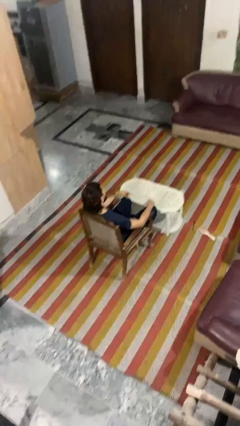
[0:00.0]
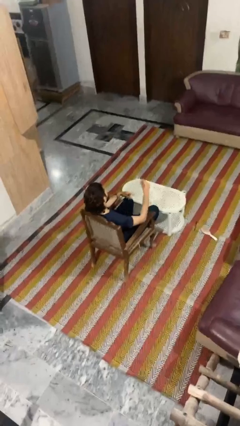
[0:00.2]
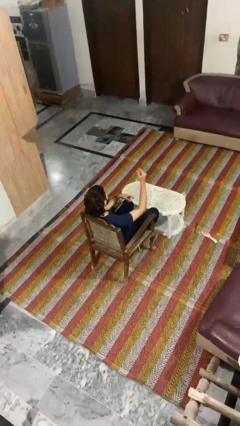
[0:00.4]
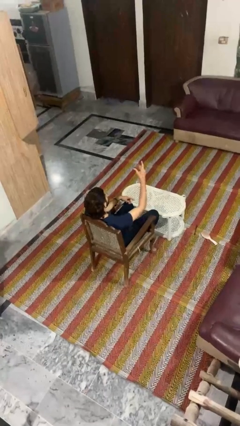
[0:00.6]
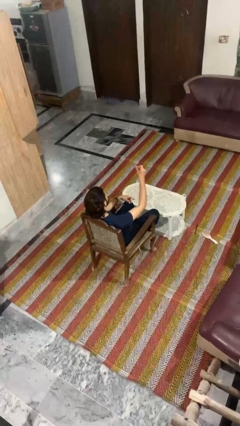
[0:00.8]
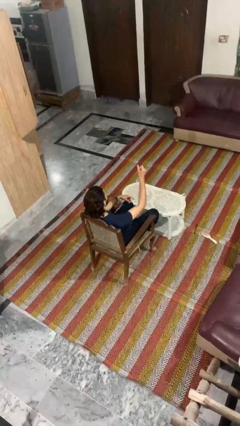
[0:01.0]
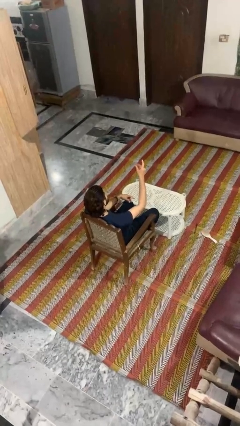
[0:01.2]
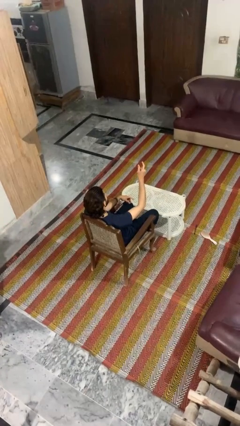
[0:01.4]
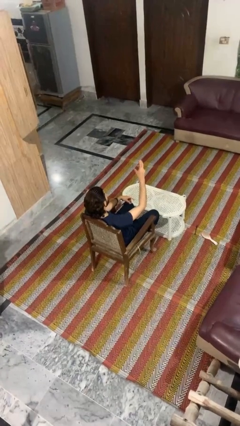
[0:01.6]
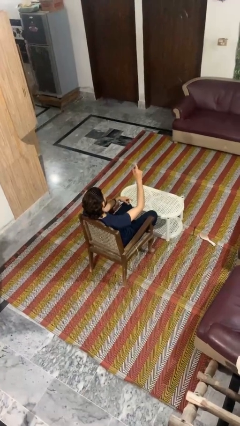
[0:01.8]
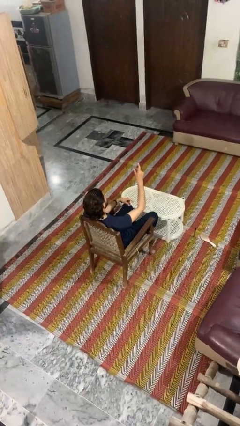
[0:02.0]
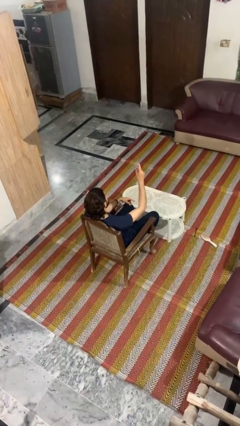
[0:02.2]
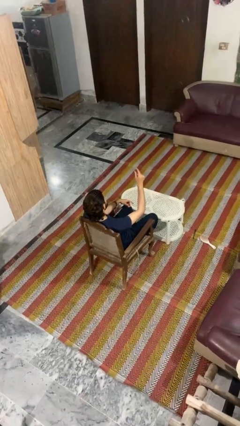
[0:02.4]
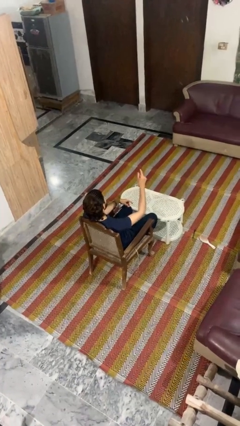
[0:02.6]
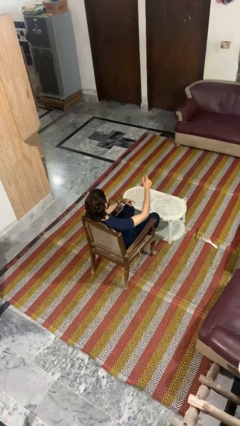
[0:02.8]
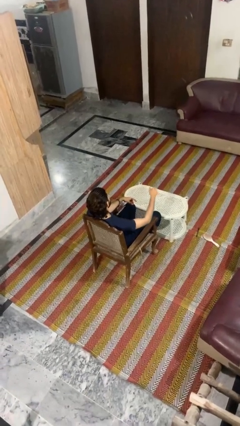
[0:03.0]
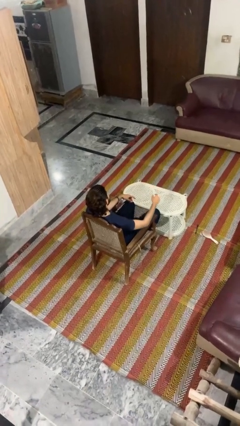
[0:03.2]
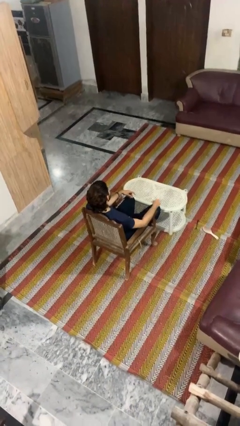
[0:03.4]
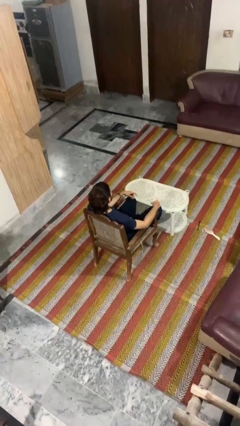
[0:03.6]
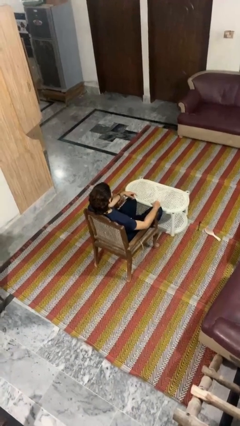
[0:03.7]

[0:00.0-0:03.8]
person snaps fingers

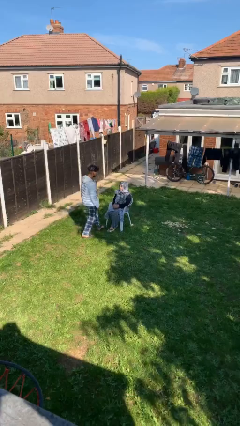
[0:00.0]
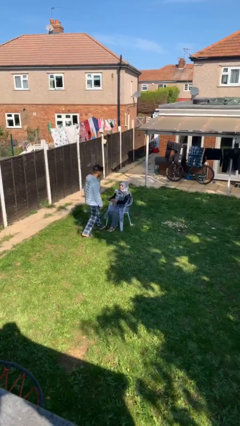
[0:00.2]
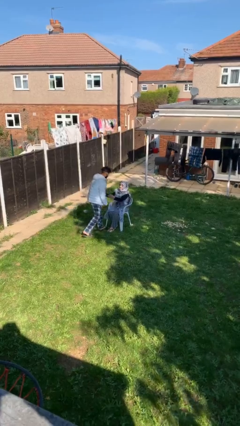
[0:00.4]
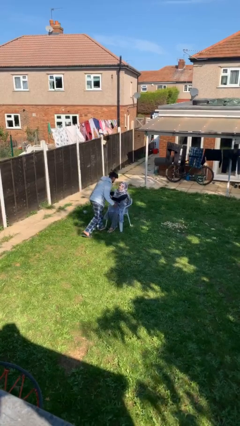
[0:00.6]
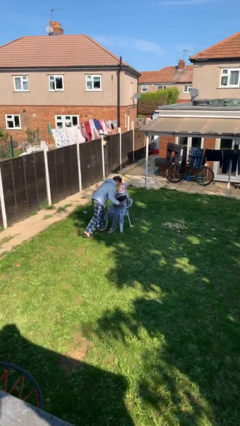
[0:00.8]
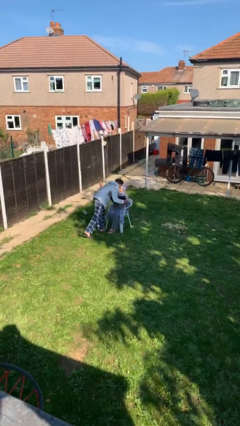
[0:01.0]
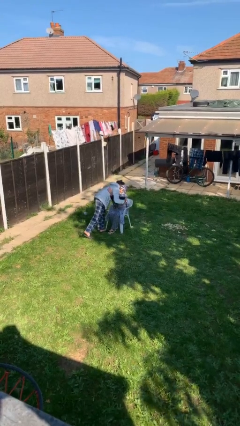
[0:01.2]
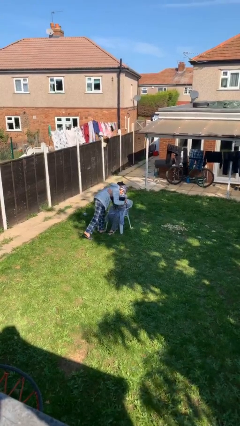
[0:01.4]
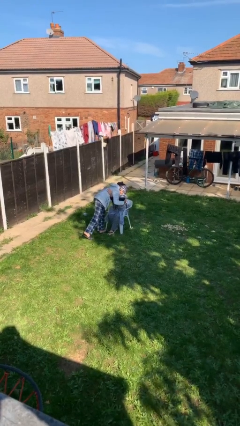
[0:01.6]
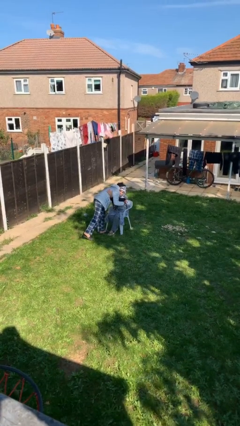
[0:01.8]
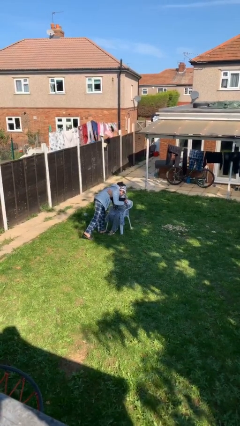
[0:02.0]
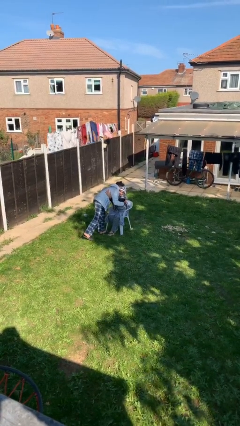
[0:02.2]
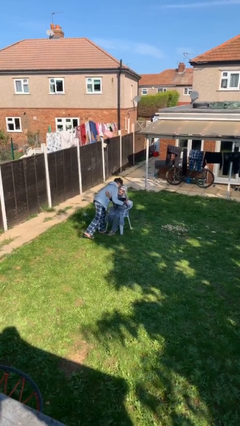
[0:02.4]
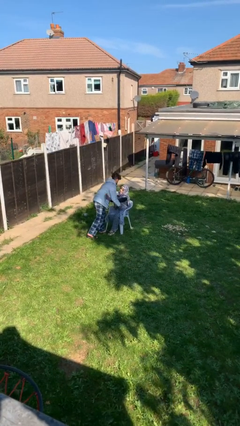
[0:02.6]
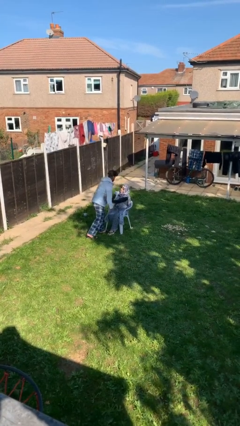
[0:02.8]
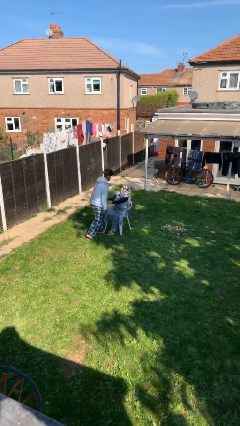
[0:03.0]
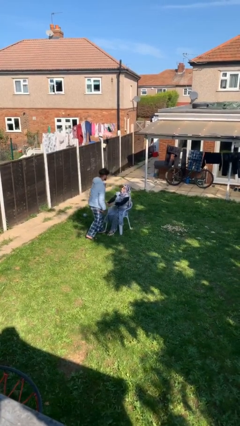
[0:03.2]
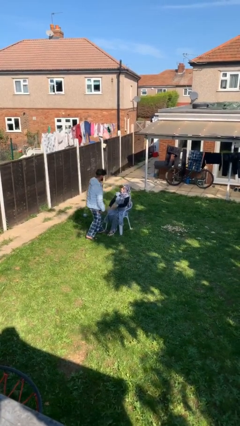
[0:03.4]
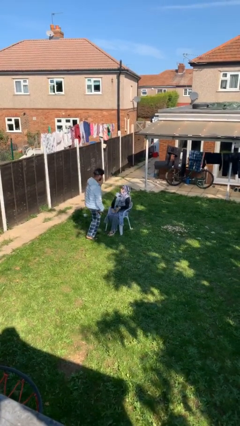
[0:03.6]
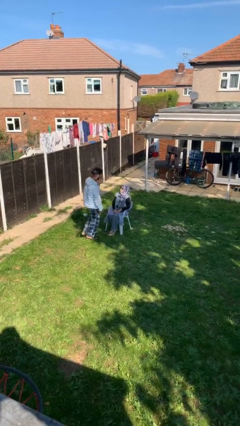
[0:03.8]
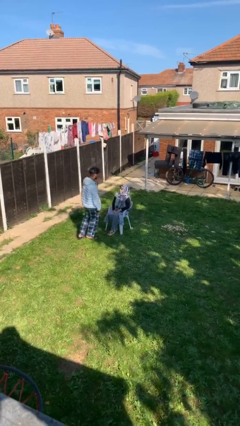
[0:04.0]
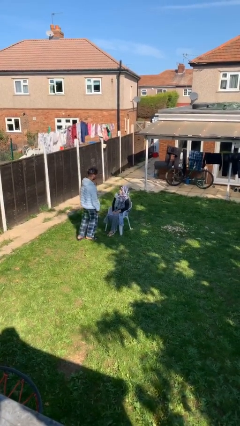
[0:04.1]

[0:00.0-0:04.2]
person embraces person

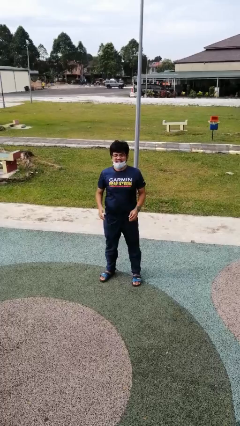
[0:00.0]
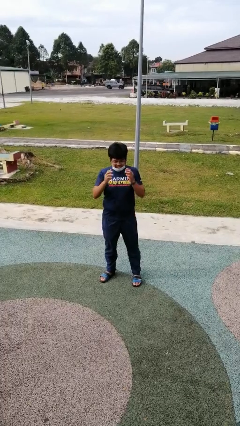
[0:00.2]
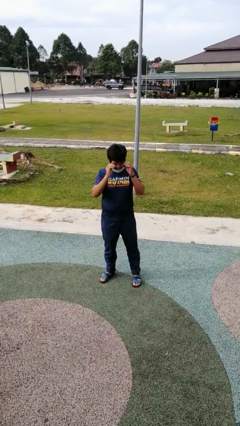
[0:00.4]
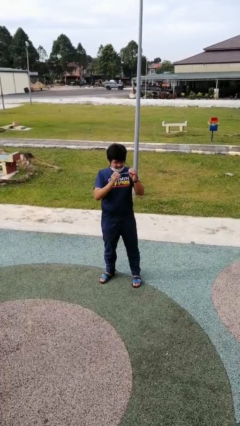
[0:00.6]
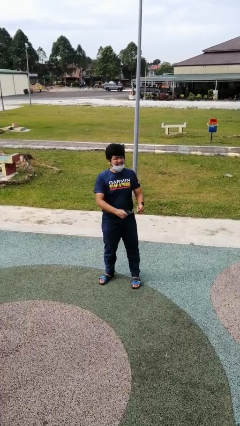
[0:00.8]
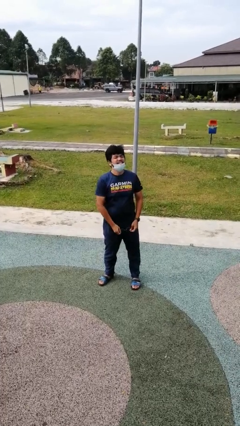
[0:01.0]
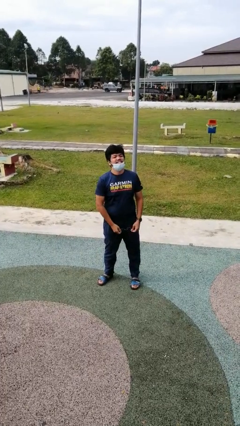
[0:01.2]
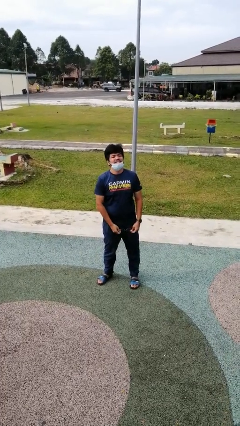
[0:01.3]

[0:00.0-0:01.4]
person takes off glasses

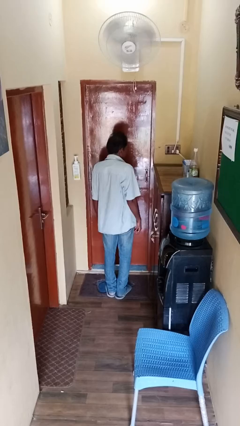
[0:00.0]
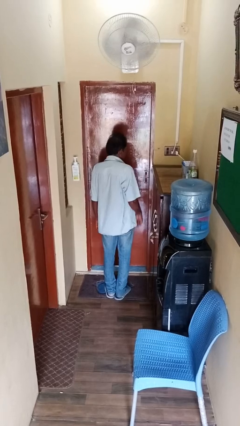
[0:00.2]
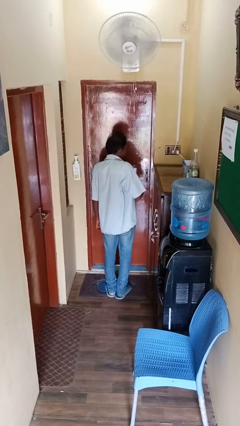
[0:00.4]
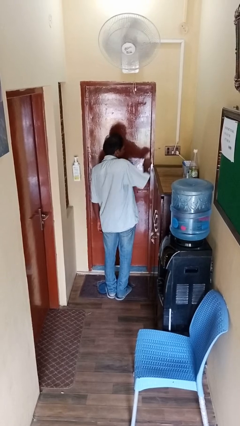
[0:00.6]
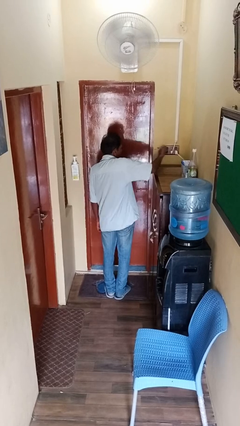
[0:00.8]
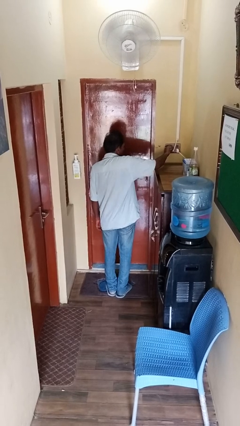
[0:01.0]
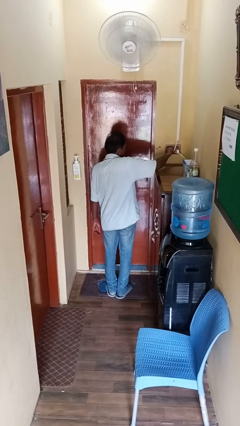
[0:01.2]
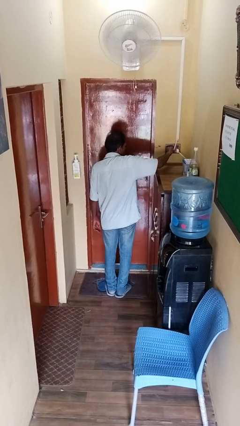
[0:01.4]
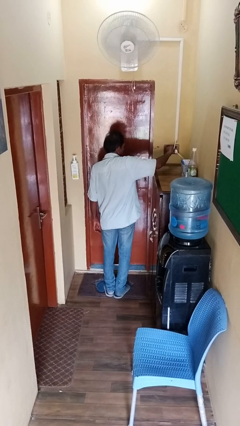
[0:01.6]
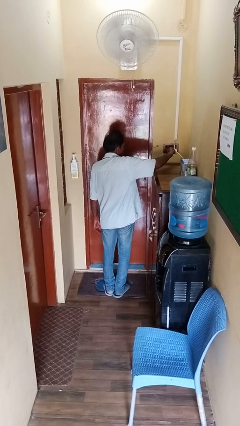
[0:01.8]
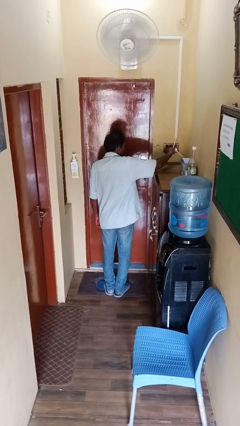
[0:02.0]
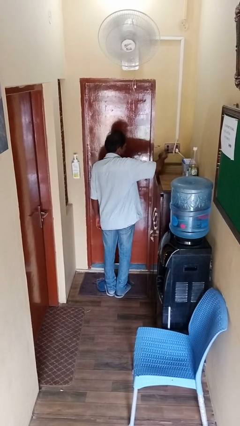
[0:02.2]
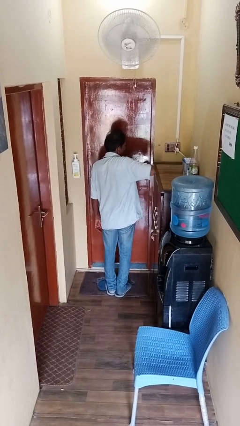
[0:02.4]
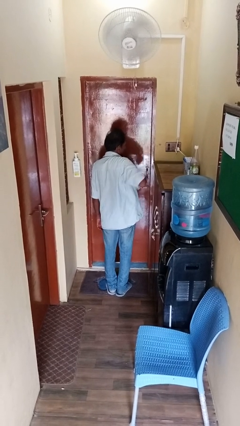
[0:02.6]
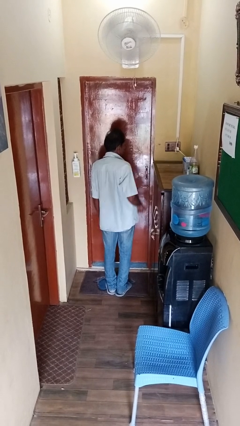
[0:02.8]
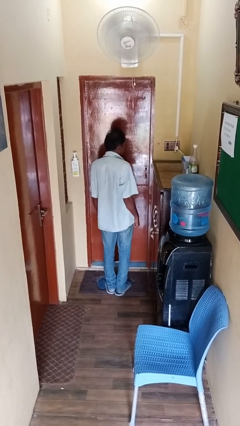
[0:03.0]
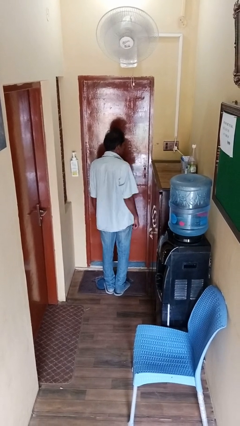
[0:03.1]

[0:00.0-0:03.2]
person turns off fan

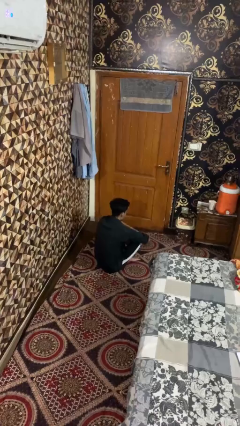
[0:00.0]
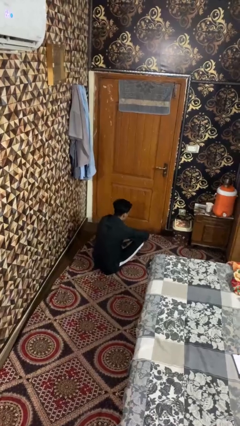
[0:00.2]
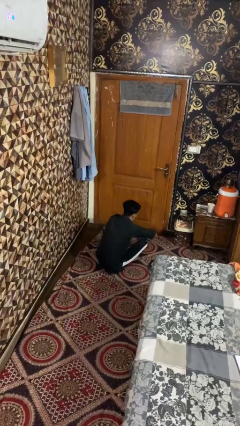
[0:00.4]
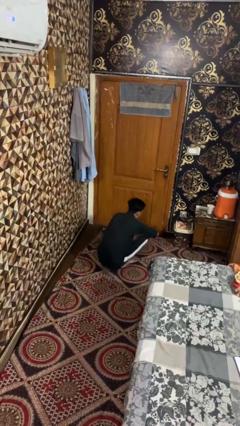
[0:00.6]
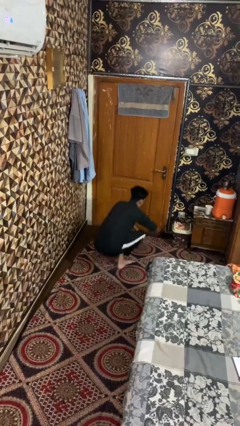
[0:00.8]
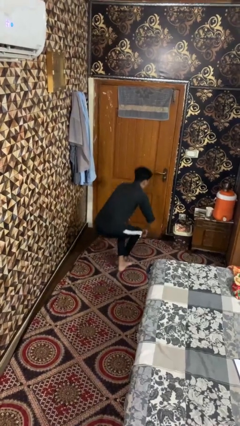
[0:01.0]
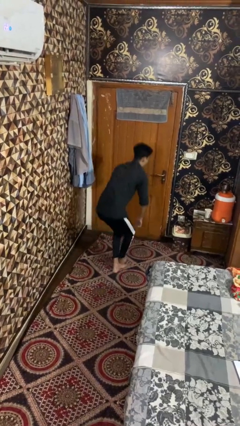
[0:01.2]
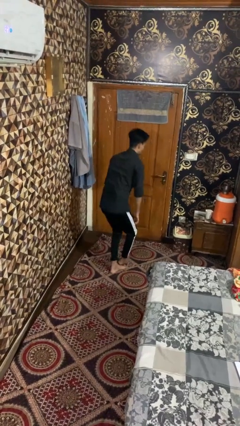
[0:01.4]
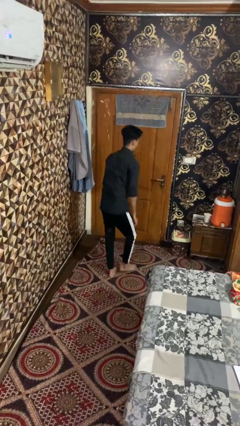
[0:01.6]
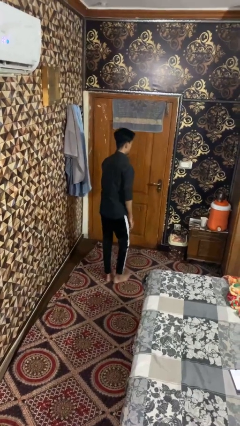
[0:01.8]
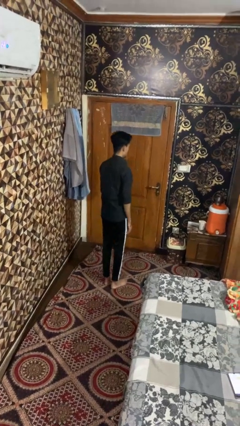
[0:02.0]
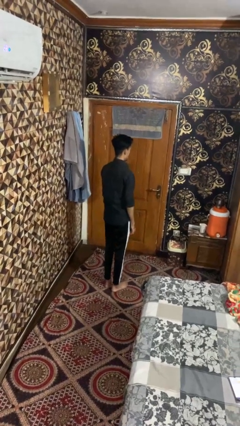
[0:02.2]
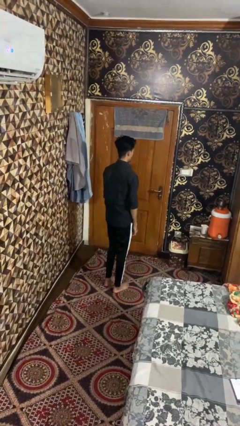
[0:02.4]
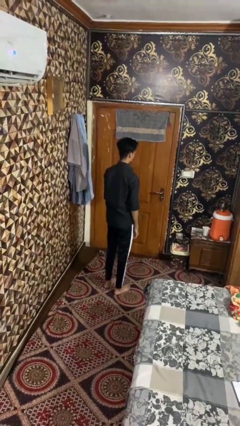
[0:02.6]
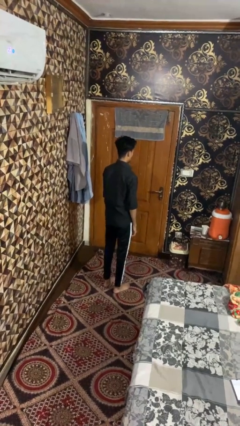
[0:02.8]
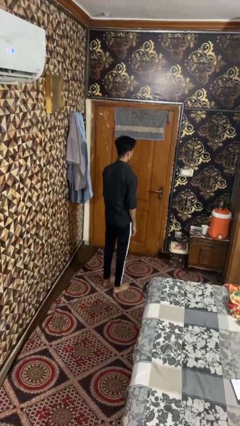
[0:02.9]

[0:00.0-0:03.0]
person stands up from floor

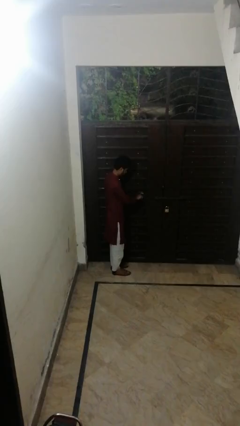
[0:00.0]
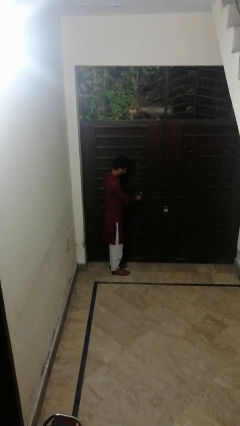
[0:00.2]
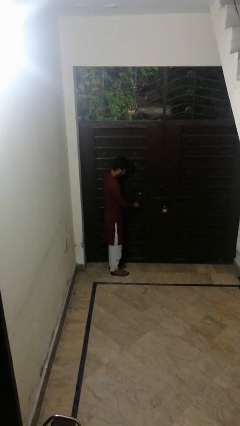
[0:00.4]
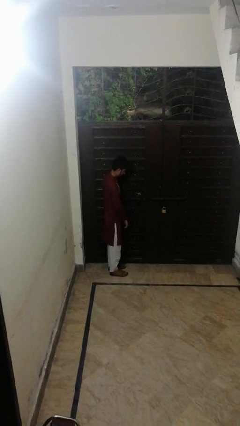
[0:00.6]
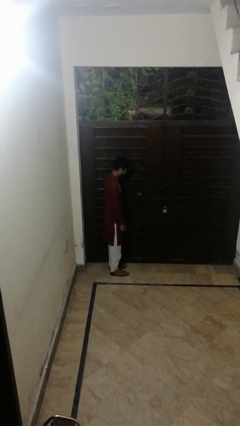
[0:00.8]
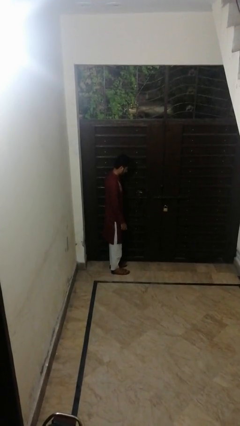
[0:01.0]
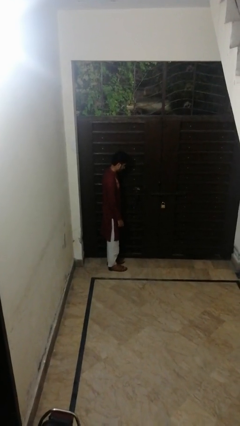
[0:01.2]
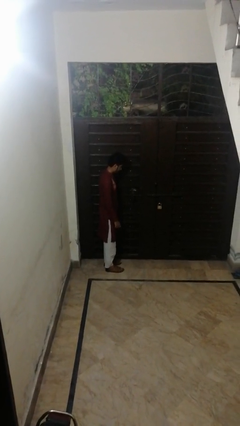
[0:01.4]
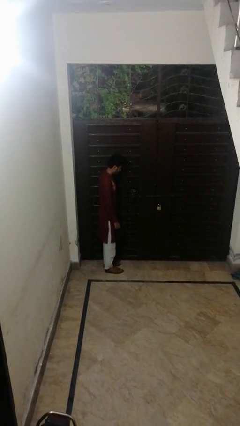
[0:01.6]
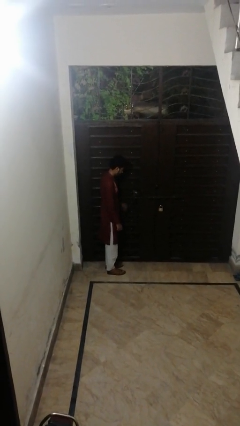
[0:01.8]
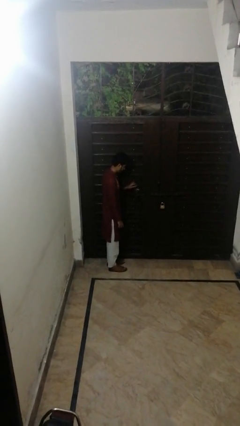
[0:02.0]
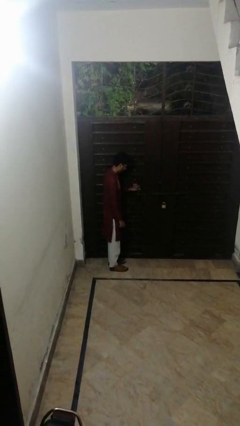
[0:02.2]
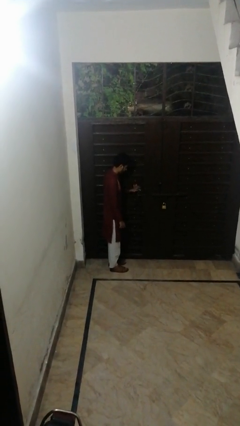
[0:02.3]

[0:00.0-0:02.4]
person unlocks door with keys
